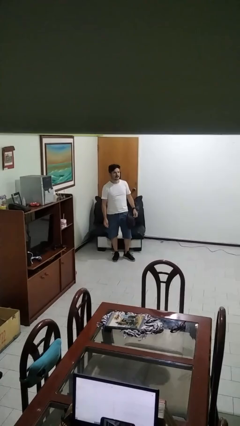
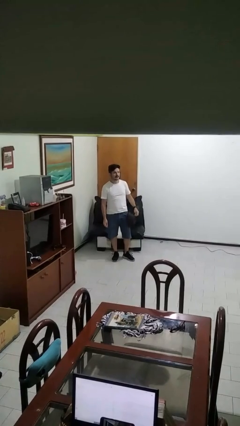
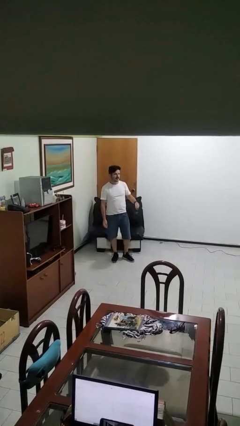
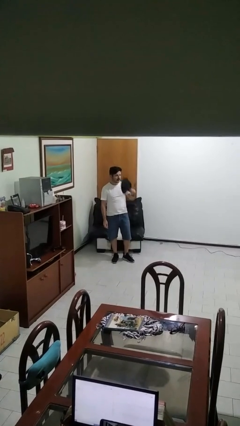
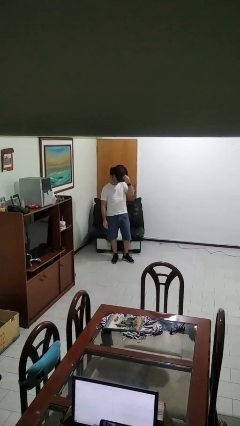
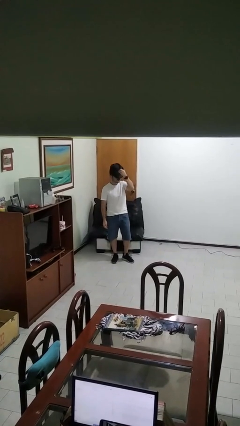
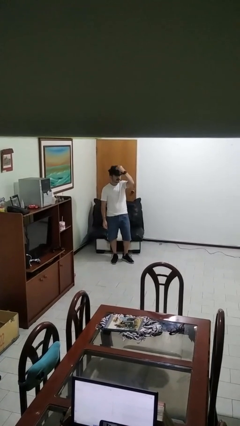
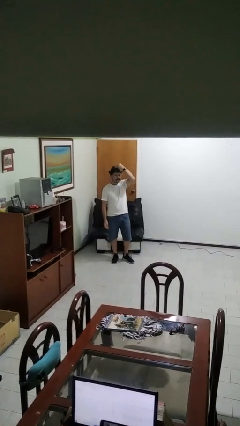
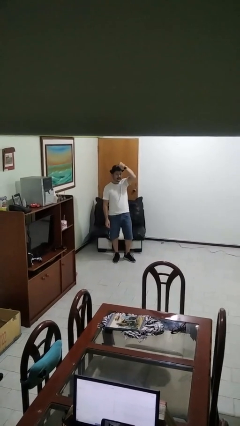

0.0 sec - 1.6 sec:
person puts on hat

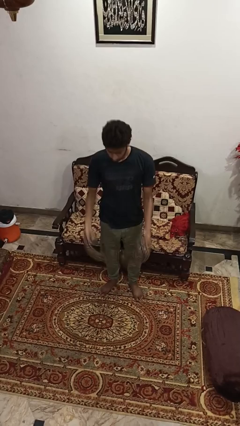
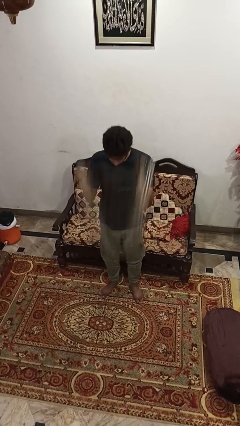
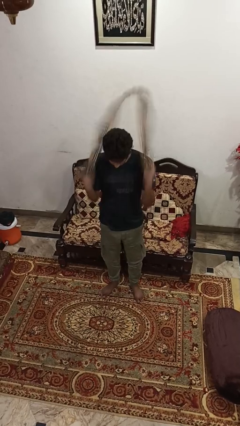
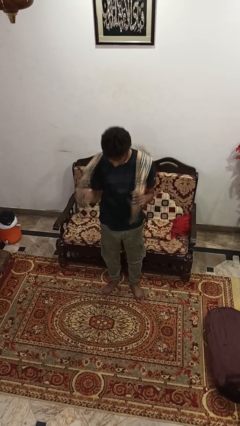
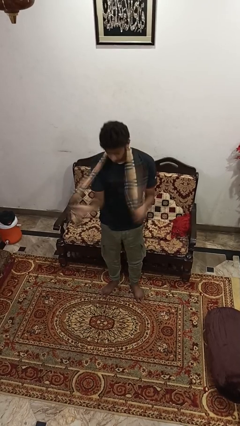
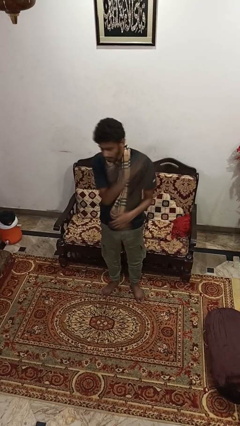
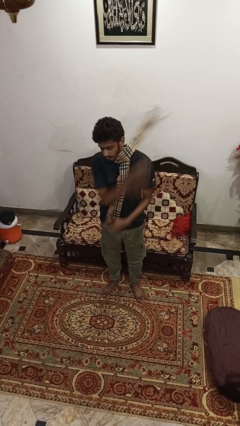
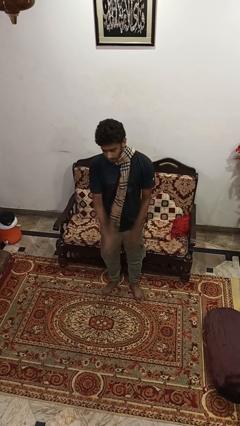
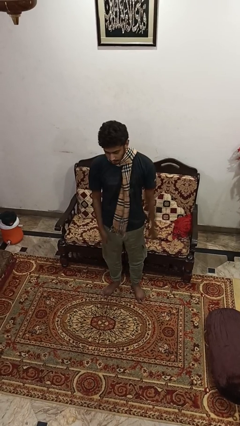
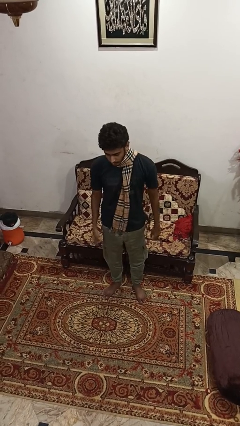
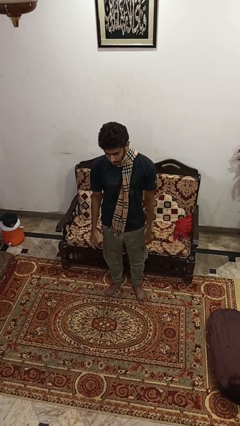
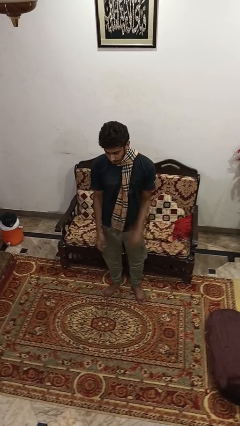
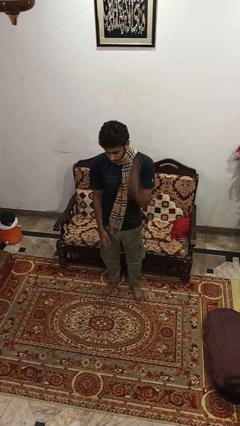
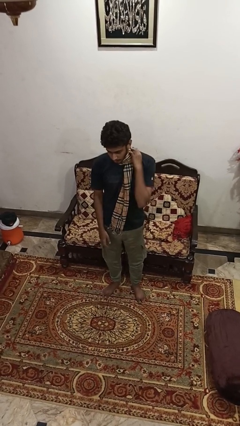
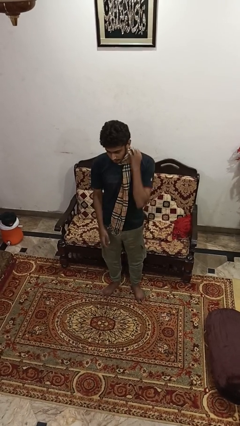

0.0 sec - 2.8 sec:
person puts on scarf

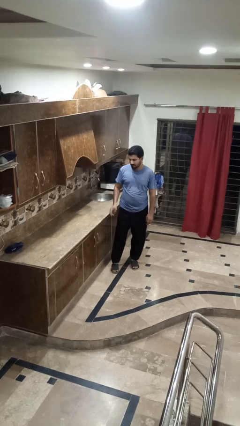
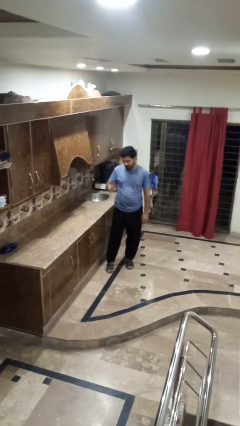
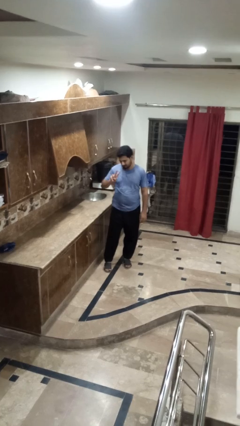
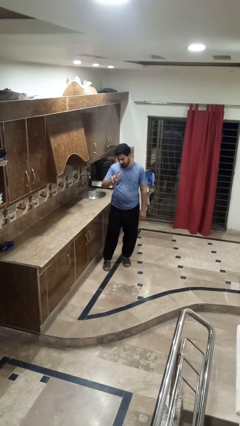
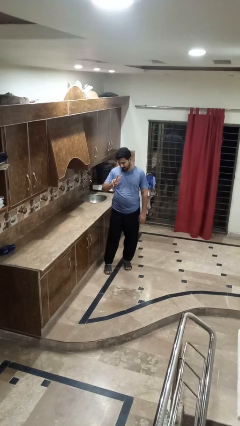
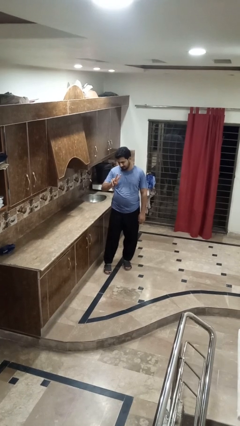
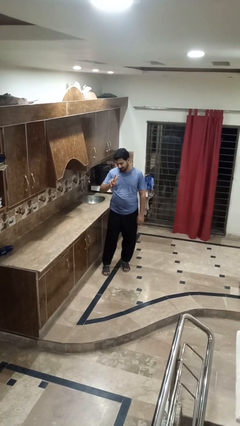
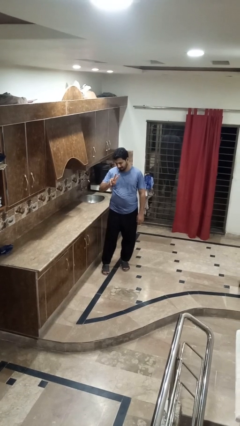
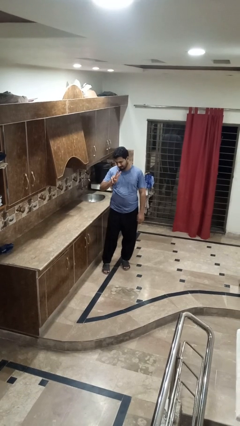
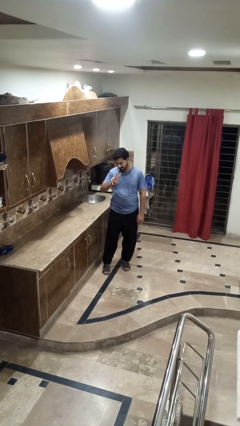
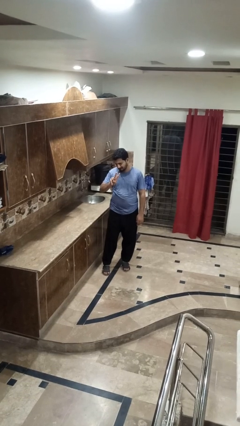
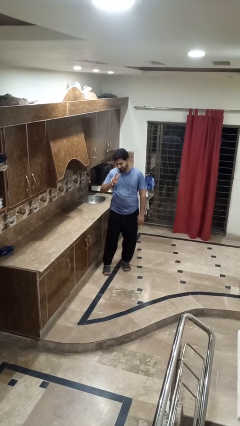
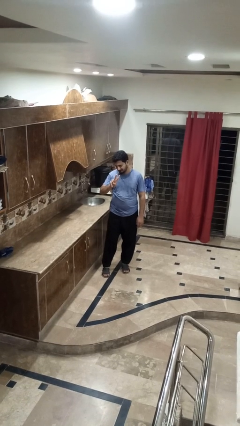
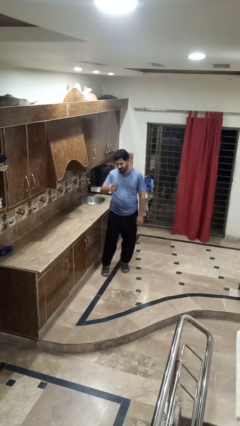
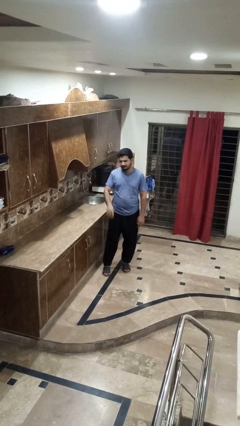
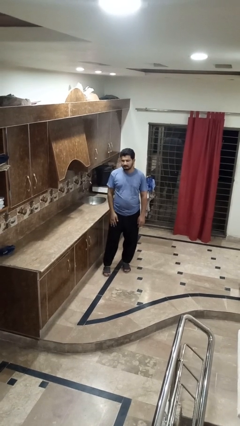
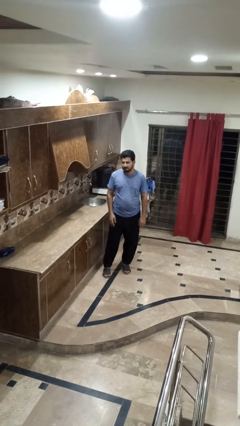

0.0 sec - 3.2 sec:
person gestures peace

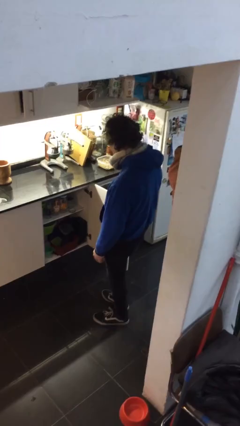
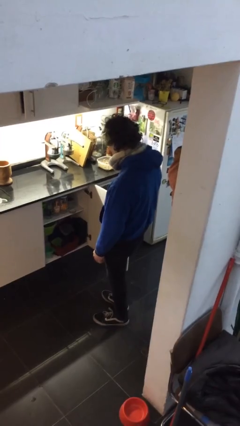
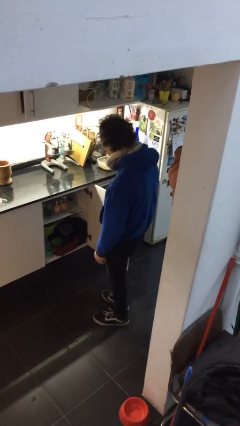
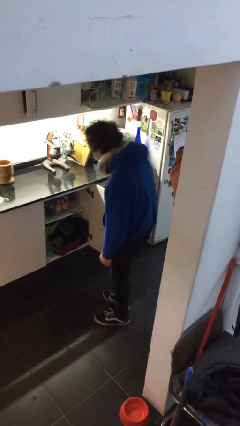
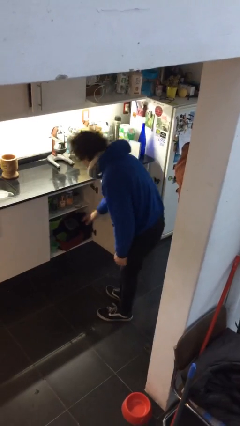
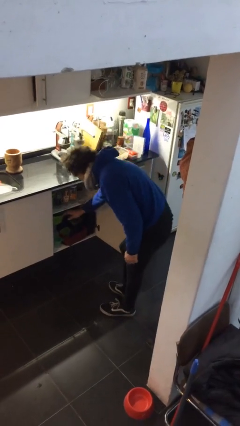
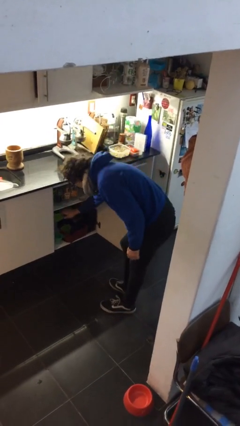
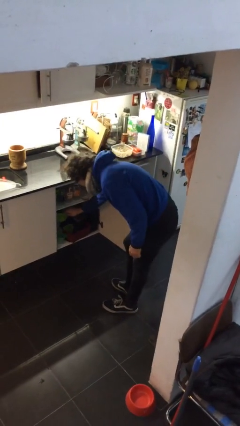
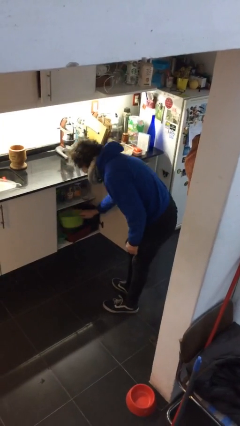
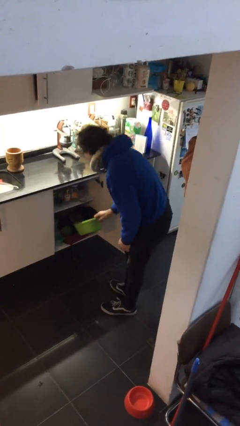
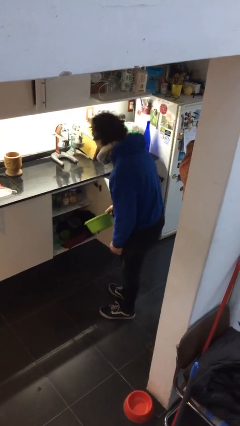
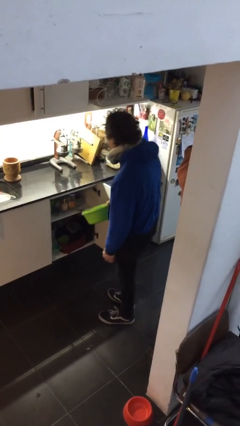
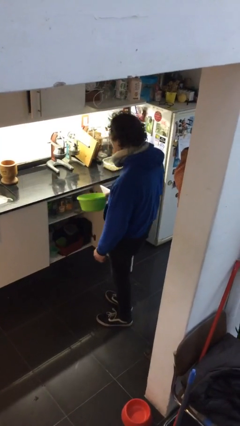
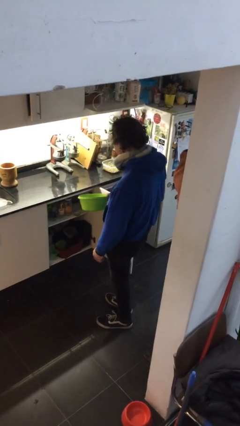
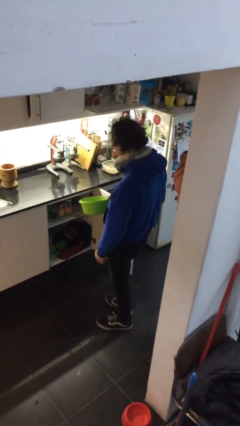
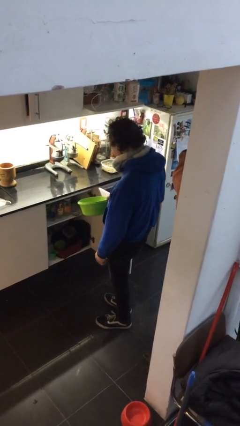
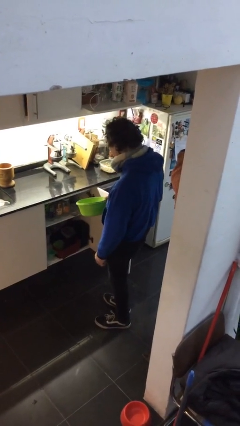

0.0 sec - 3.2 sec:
person picks up object from cabinet

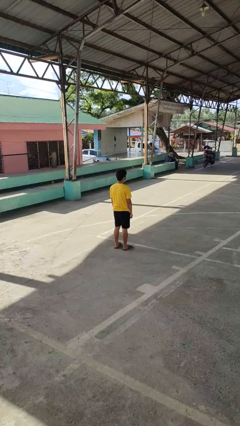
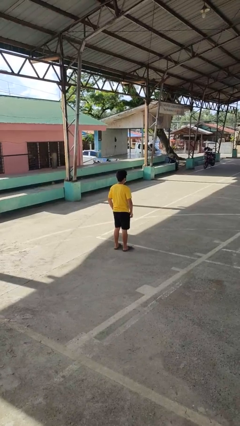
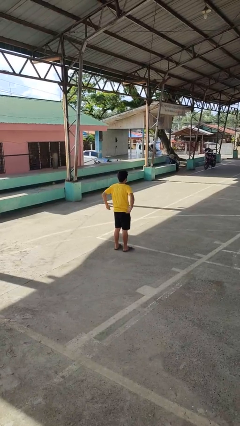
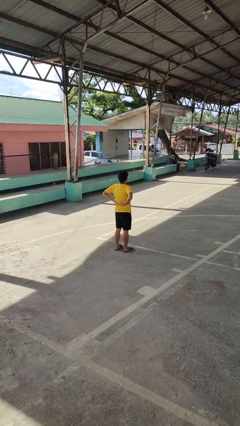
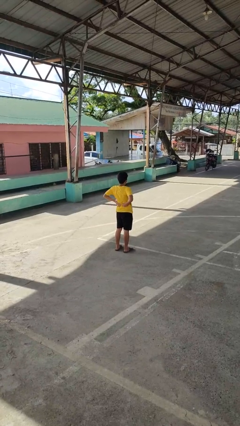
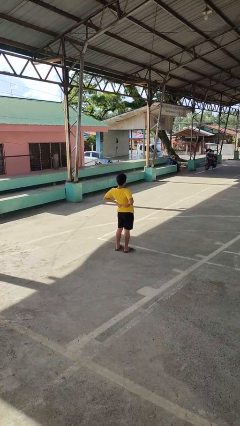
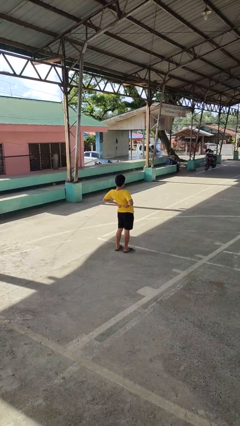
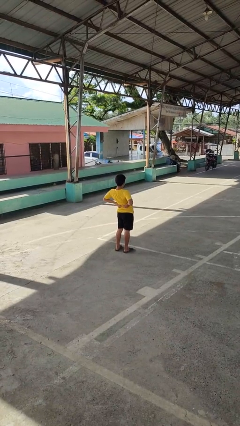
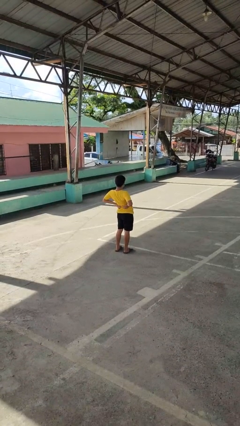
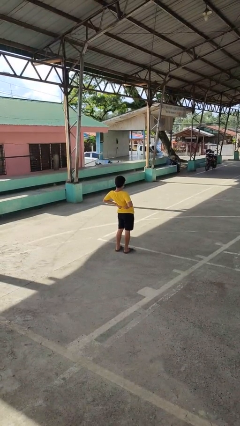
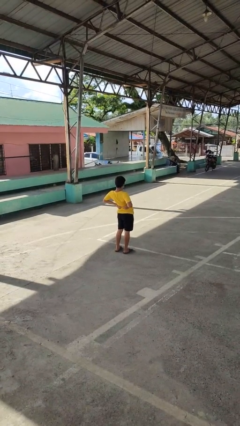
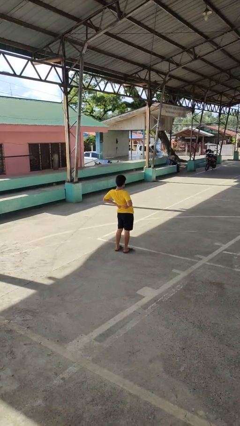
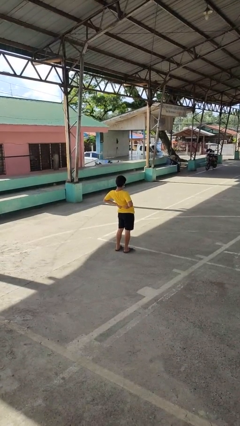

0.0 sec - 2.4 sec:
person stretches back

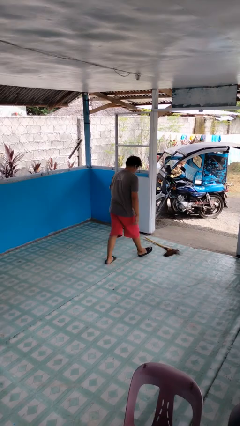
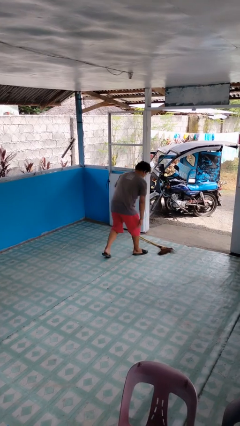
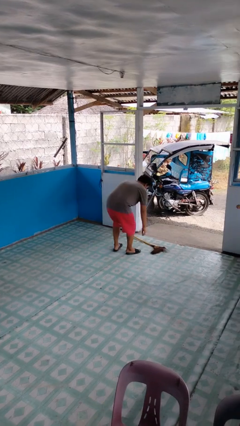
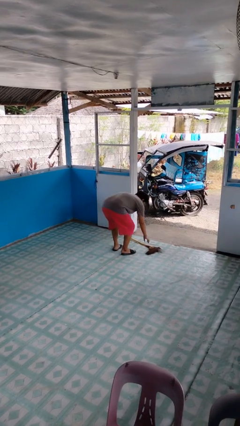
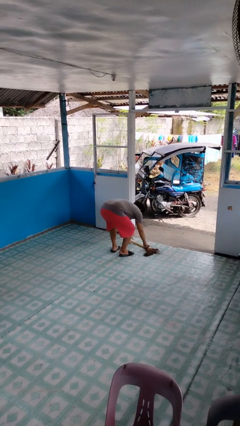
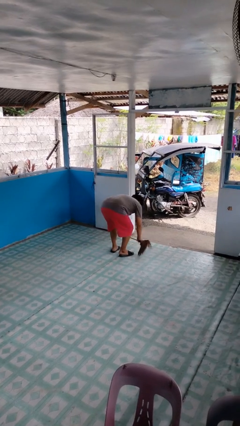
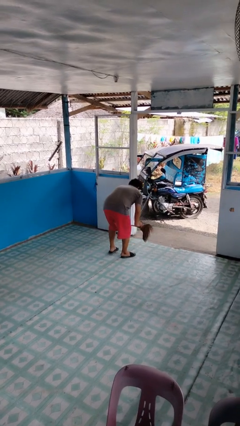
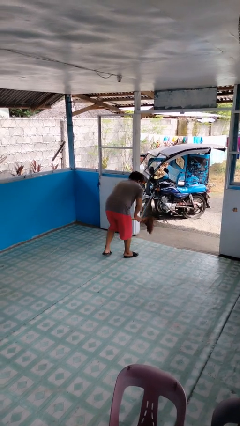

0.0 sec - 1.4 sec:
person picks up object from floor

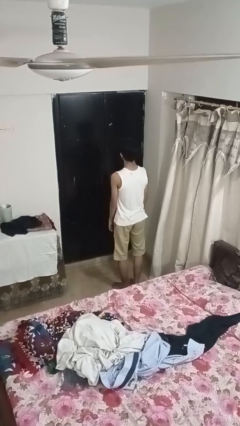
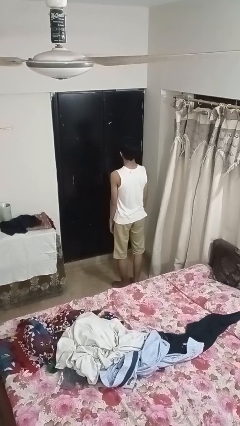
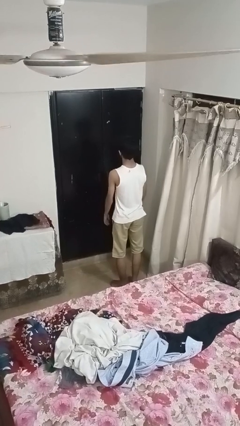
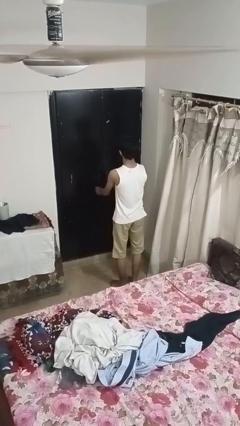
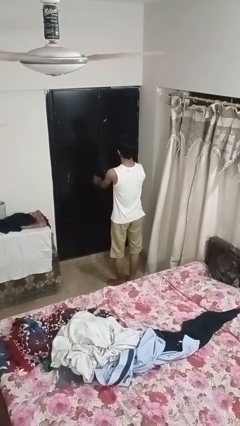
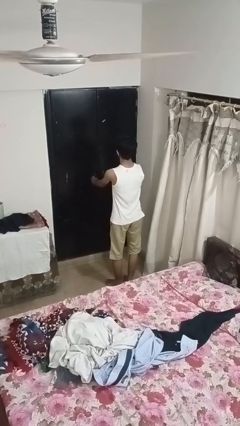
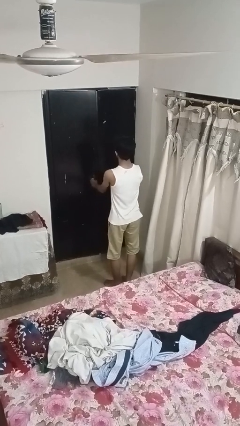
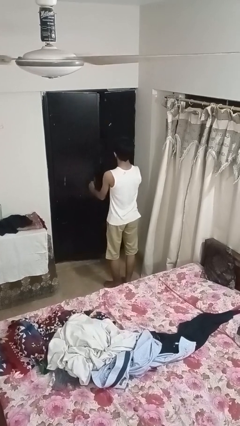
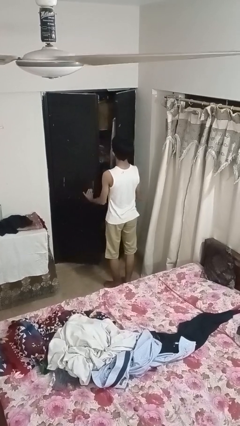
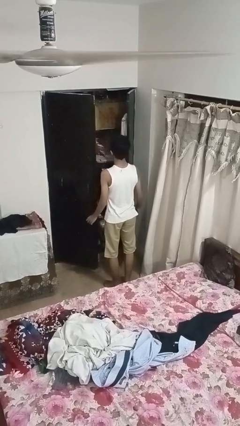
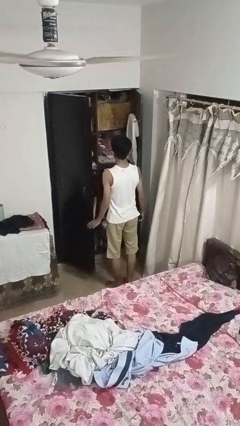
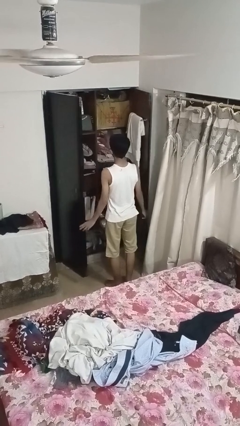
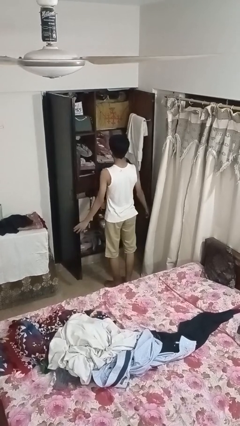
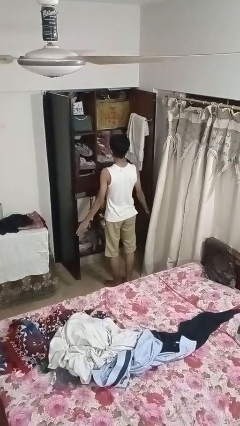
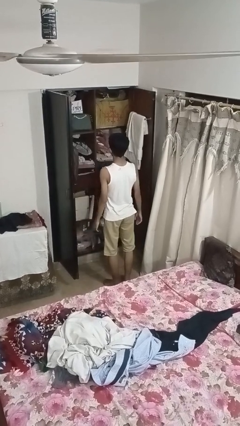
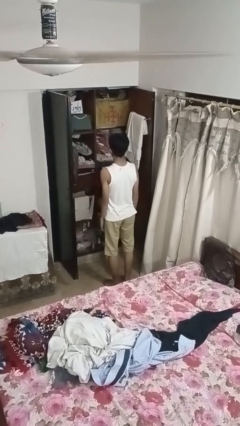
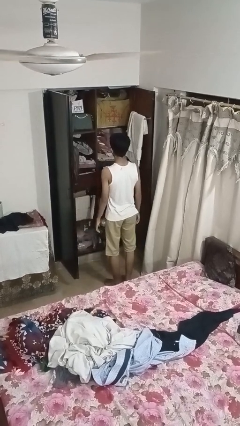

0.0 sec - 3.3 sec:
person opens closet door
